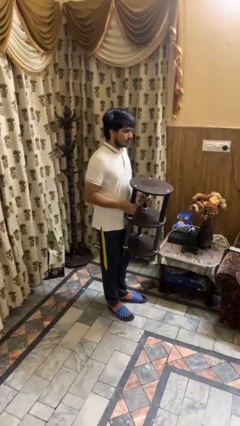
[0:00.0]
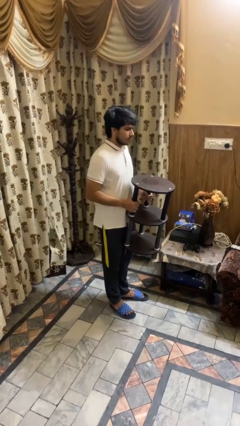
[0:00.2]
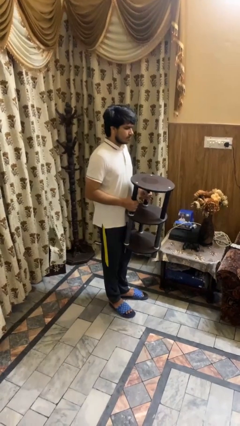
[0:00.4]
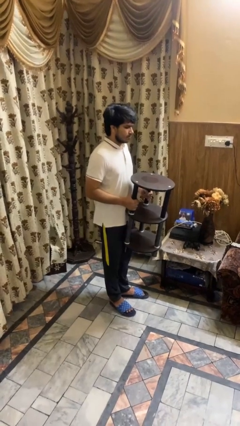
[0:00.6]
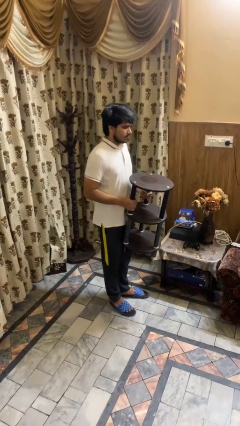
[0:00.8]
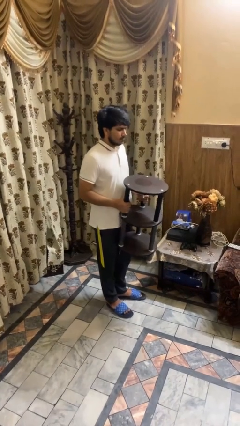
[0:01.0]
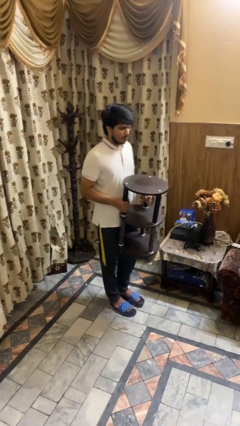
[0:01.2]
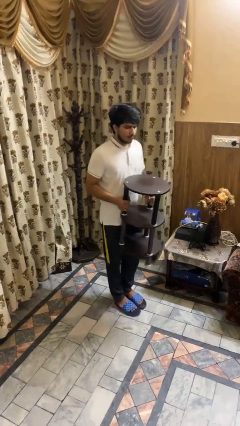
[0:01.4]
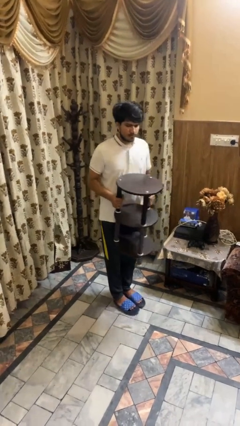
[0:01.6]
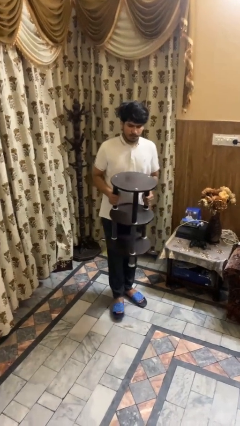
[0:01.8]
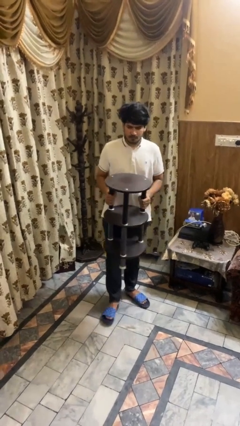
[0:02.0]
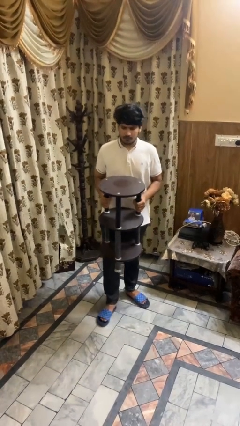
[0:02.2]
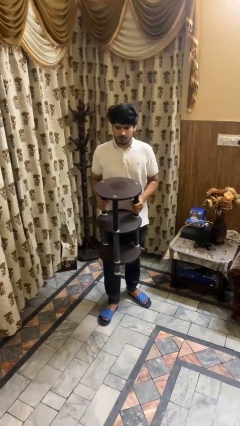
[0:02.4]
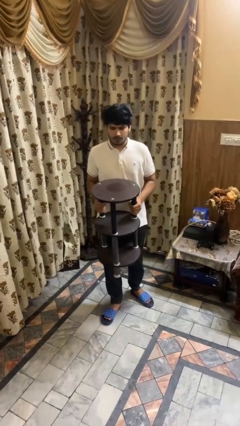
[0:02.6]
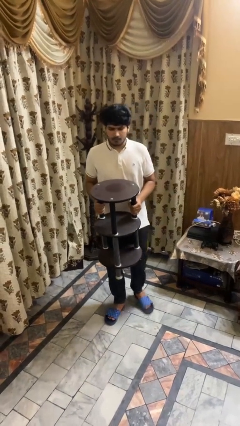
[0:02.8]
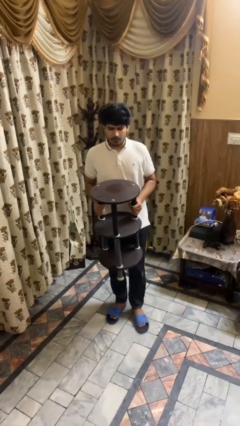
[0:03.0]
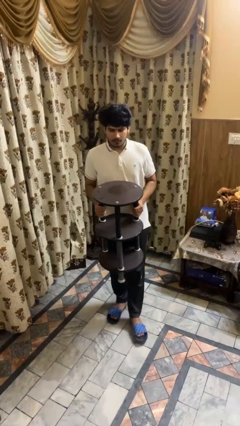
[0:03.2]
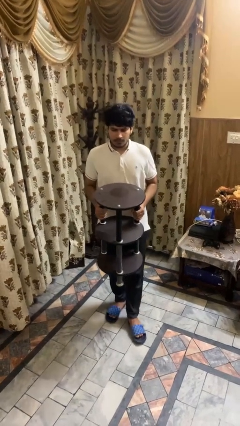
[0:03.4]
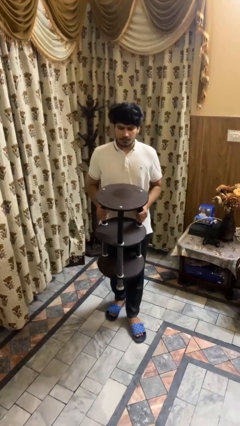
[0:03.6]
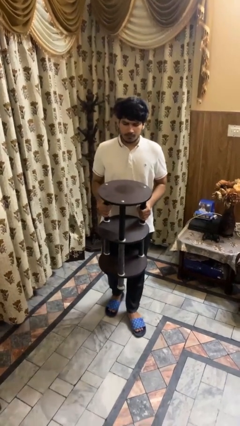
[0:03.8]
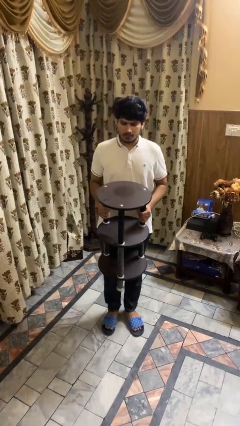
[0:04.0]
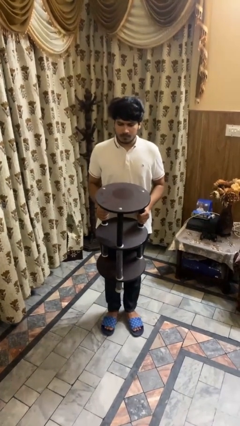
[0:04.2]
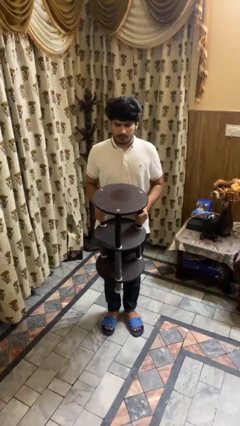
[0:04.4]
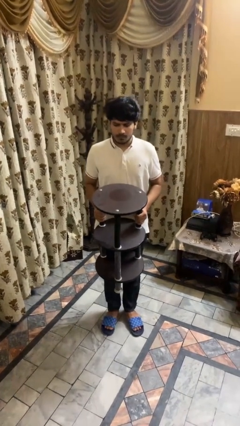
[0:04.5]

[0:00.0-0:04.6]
person carries furniture

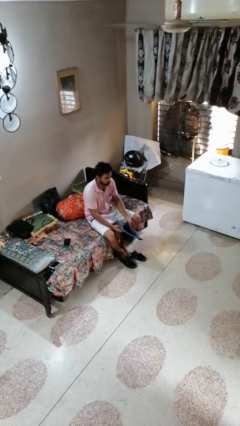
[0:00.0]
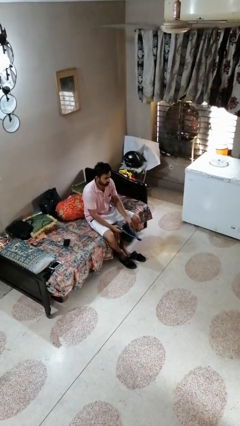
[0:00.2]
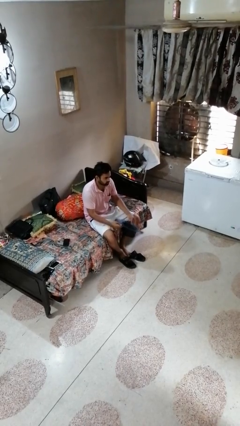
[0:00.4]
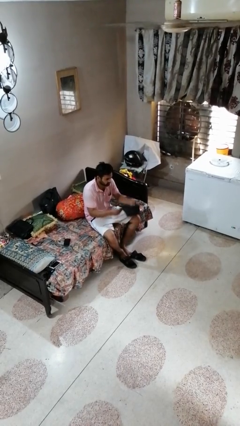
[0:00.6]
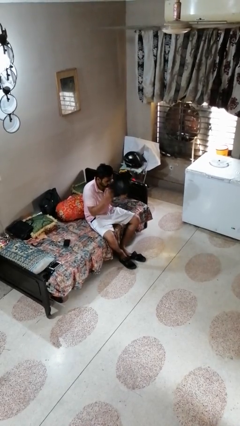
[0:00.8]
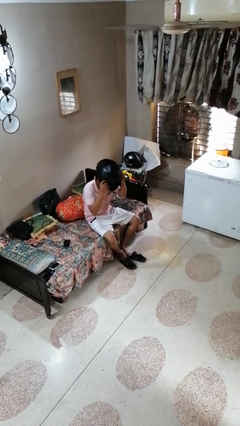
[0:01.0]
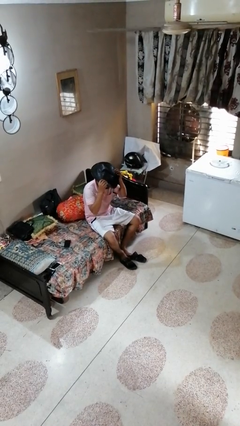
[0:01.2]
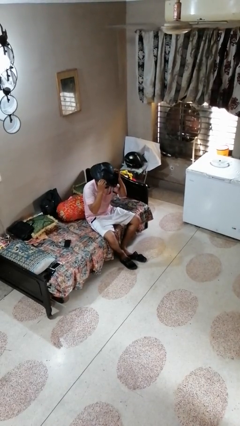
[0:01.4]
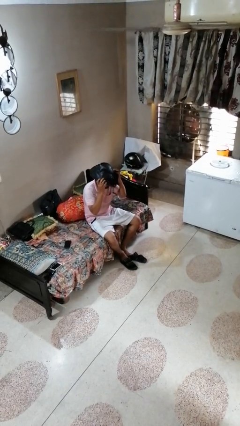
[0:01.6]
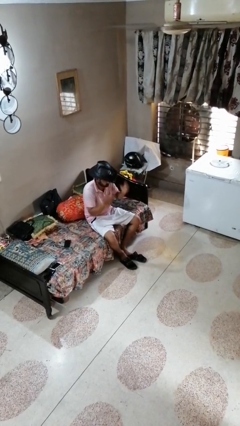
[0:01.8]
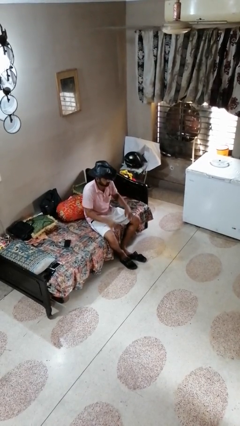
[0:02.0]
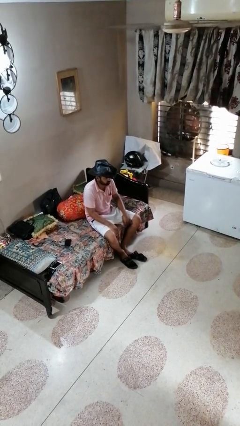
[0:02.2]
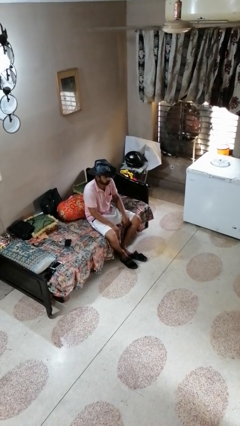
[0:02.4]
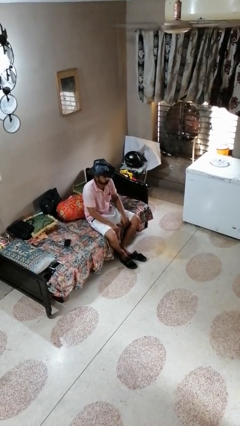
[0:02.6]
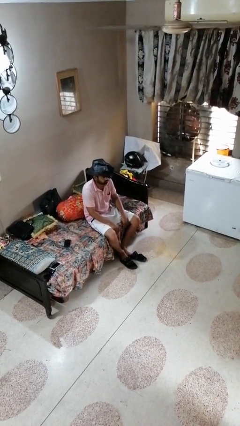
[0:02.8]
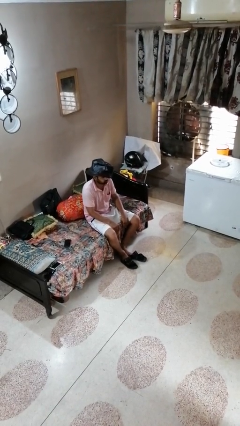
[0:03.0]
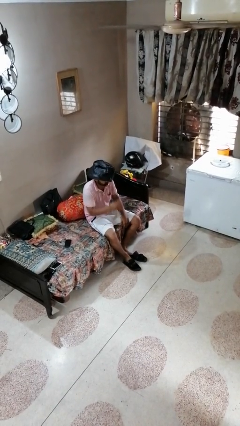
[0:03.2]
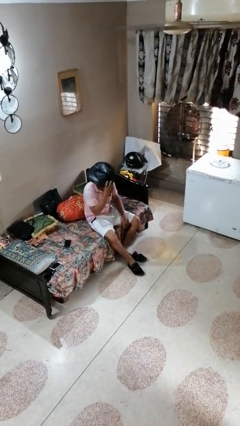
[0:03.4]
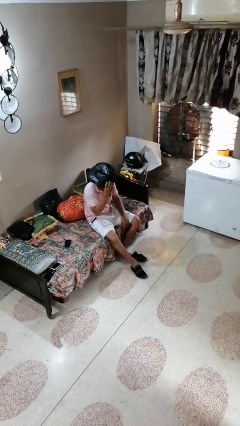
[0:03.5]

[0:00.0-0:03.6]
person puts on hat

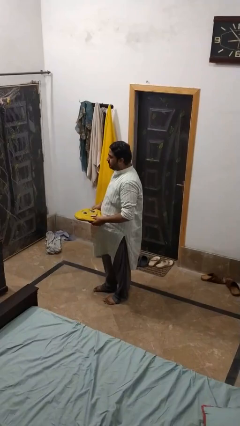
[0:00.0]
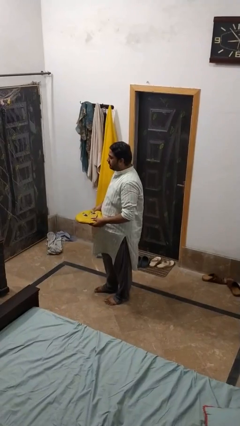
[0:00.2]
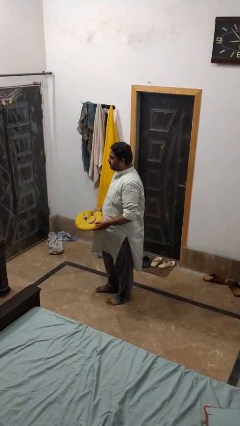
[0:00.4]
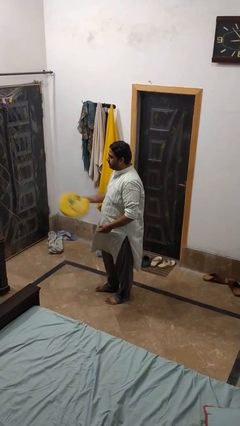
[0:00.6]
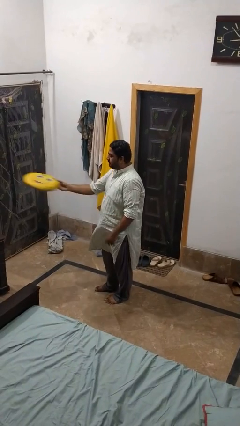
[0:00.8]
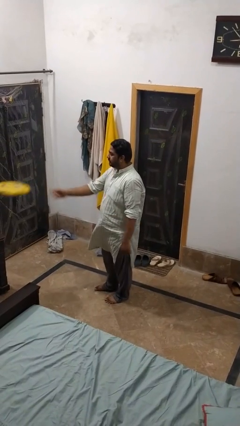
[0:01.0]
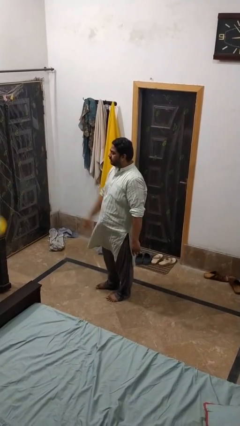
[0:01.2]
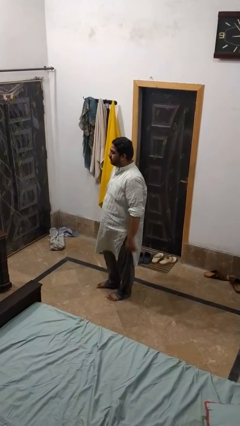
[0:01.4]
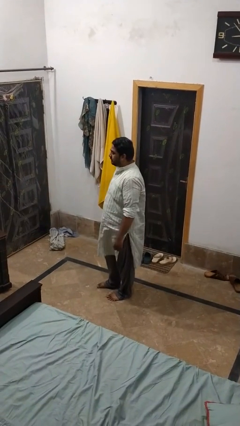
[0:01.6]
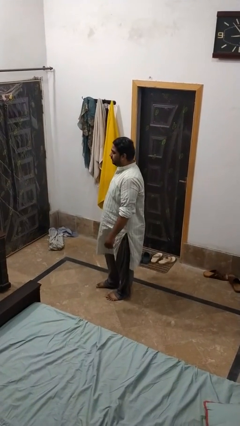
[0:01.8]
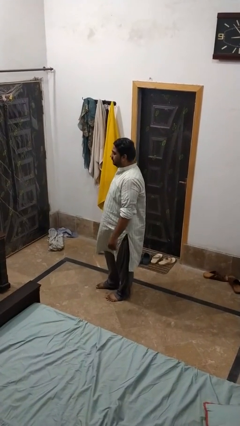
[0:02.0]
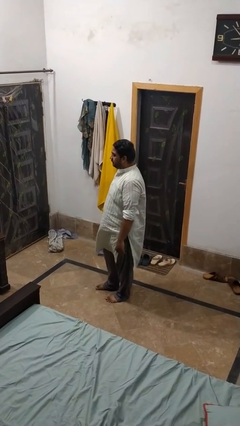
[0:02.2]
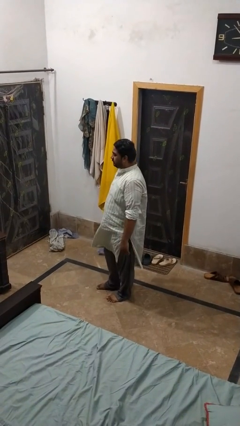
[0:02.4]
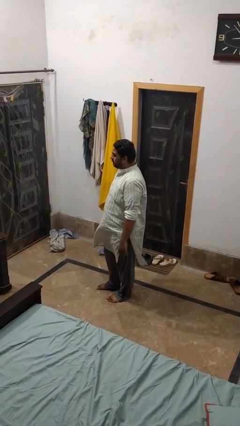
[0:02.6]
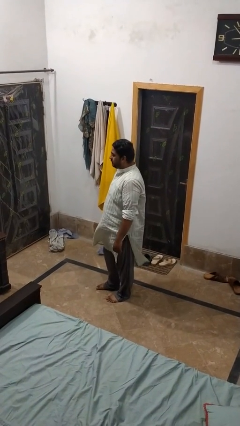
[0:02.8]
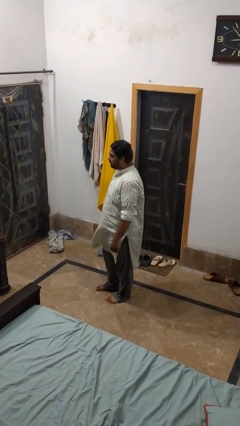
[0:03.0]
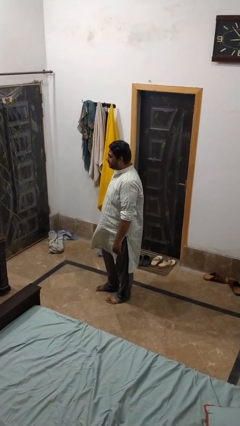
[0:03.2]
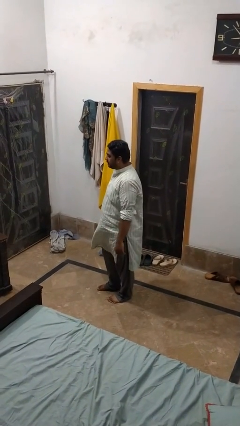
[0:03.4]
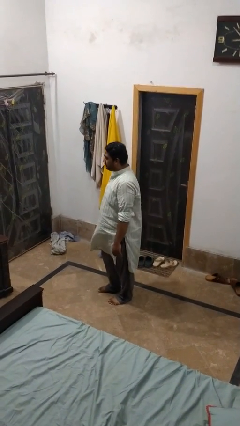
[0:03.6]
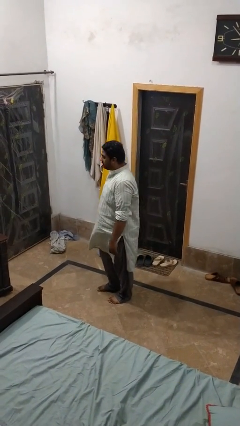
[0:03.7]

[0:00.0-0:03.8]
person throws object on table

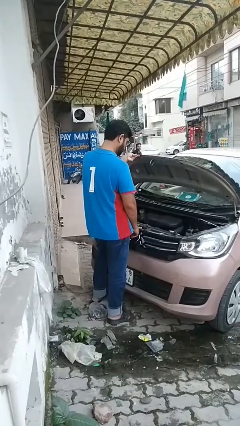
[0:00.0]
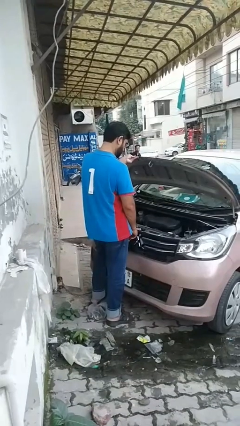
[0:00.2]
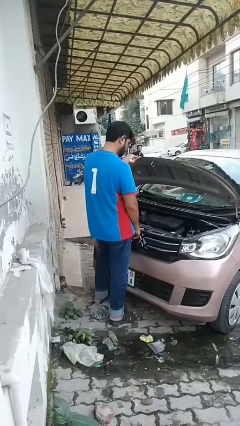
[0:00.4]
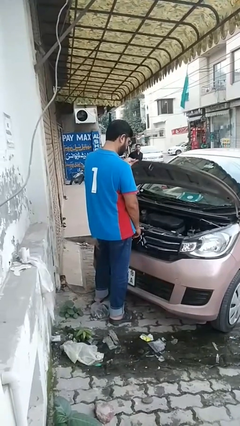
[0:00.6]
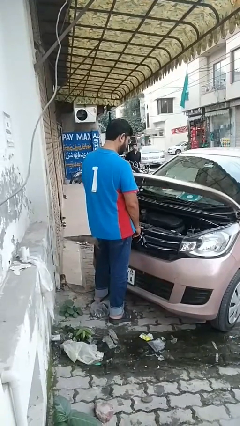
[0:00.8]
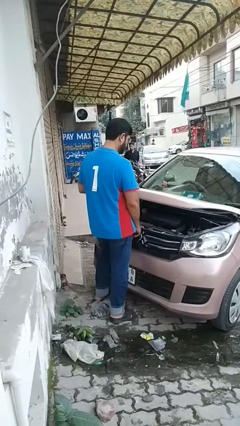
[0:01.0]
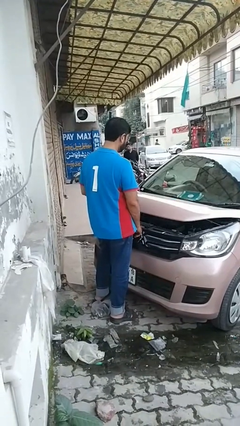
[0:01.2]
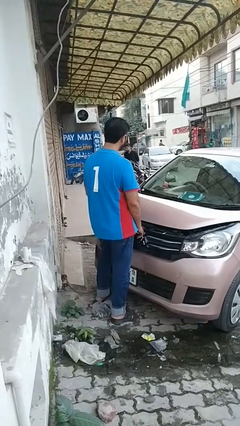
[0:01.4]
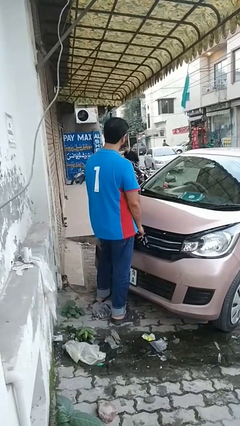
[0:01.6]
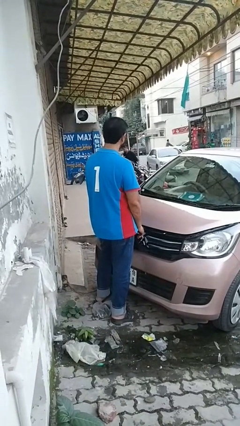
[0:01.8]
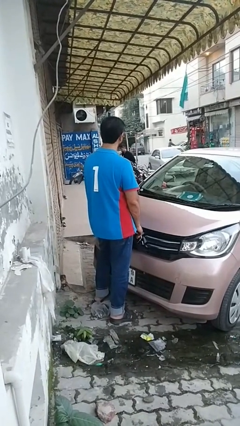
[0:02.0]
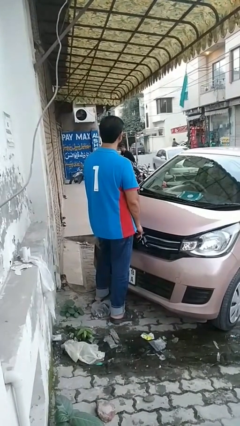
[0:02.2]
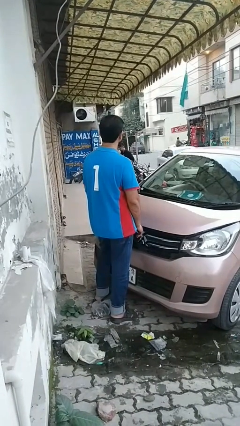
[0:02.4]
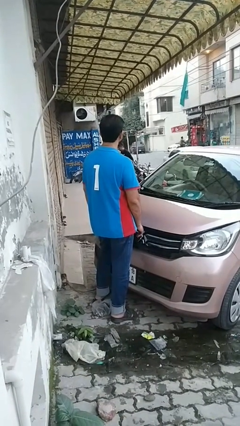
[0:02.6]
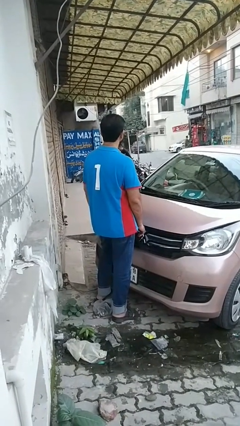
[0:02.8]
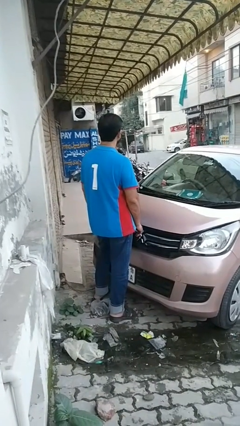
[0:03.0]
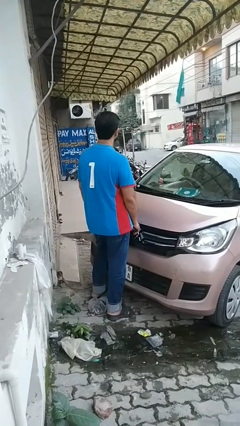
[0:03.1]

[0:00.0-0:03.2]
person closes car hood

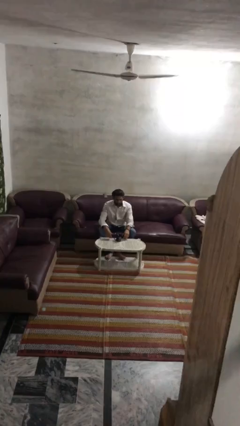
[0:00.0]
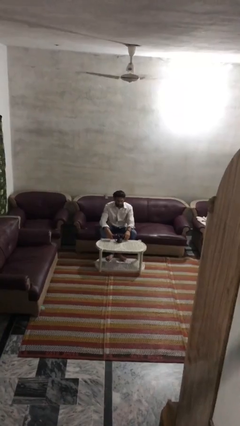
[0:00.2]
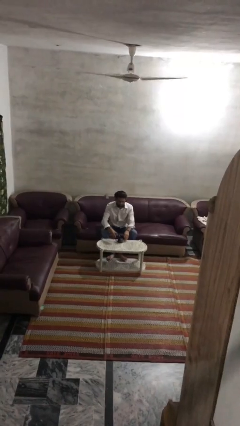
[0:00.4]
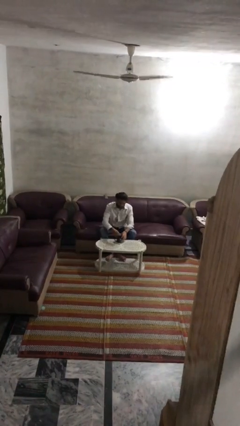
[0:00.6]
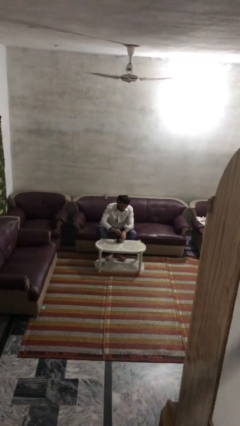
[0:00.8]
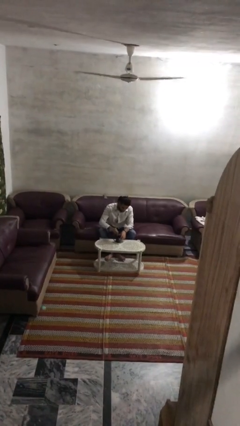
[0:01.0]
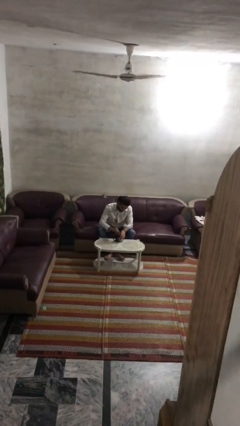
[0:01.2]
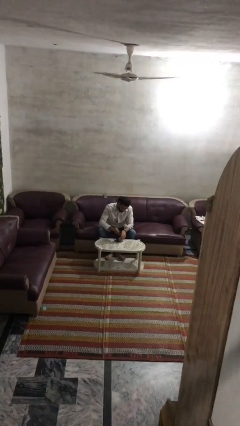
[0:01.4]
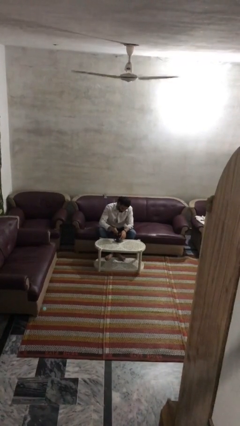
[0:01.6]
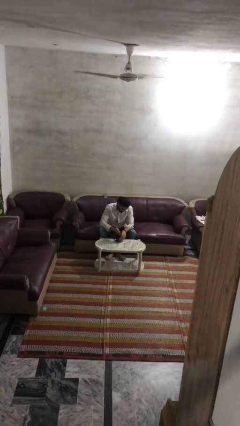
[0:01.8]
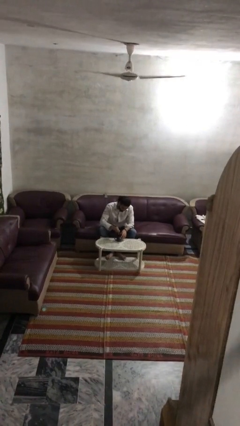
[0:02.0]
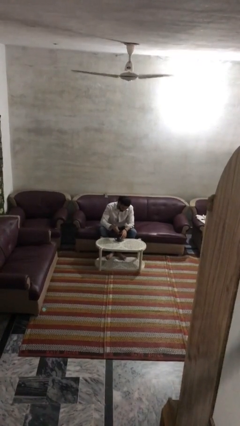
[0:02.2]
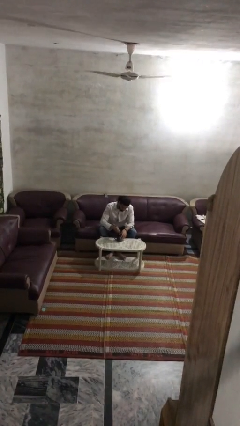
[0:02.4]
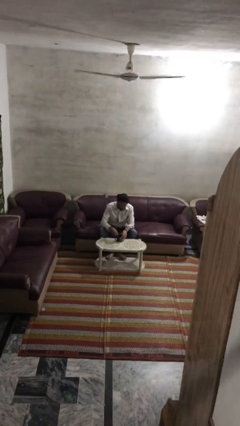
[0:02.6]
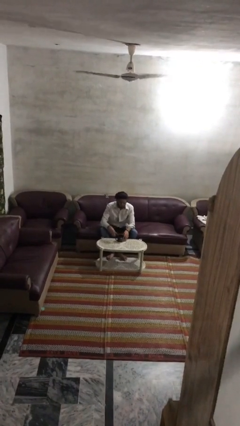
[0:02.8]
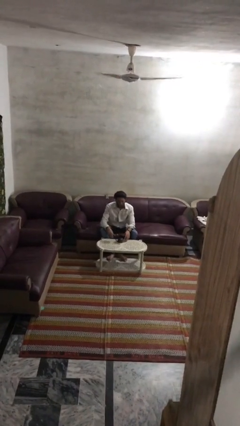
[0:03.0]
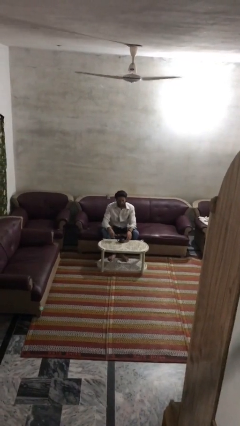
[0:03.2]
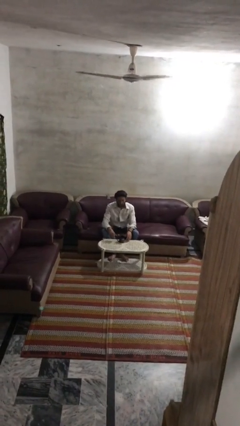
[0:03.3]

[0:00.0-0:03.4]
person stirs mug
